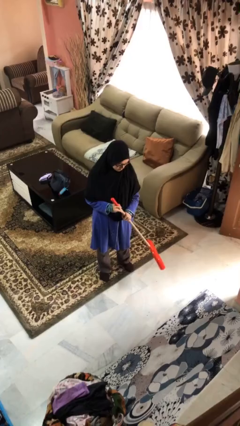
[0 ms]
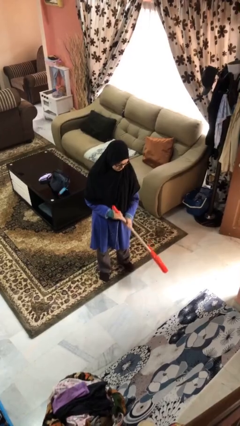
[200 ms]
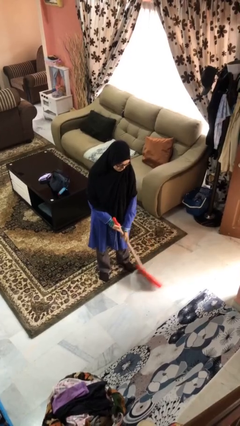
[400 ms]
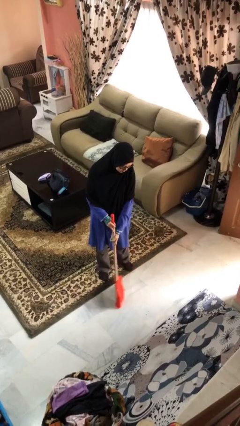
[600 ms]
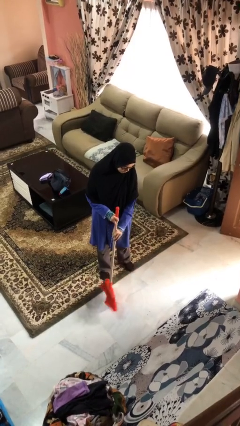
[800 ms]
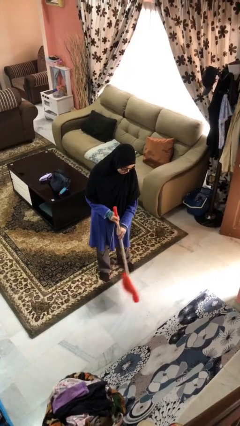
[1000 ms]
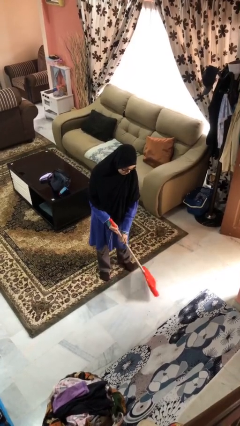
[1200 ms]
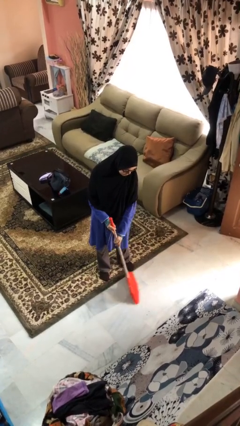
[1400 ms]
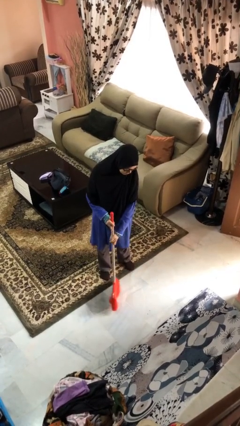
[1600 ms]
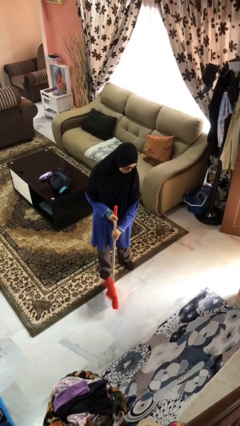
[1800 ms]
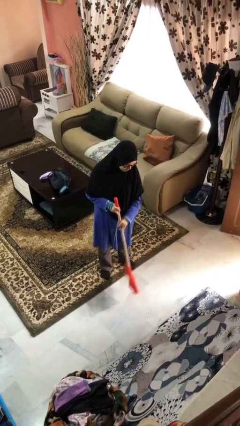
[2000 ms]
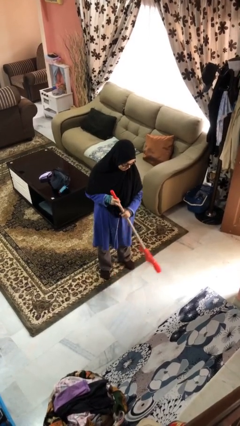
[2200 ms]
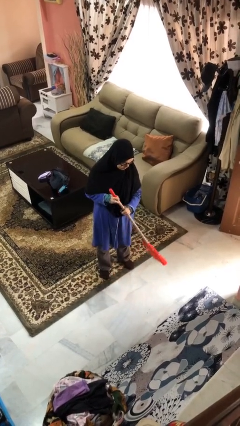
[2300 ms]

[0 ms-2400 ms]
person sweeps floor

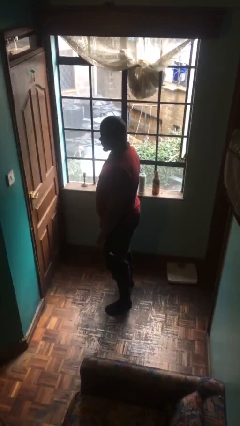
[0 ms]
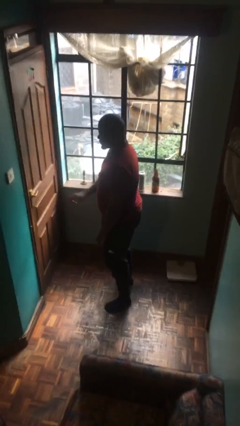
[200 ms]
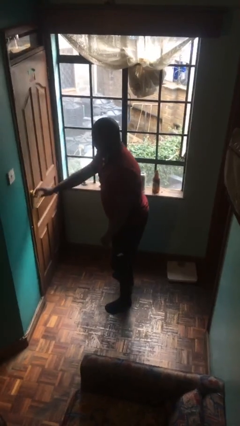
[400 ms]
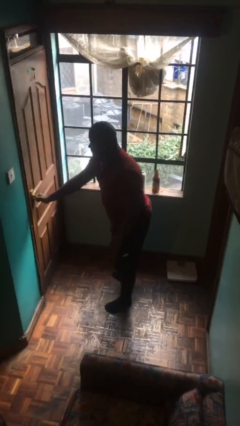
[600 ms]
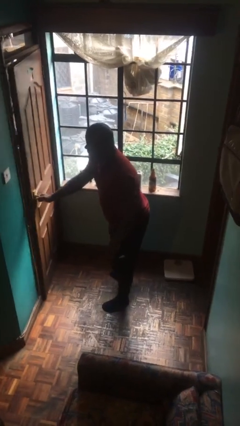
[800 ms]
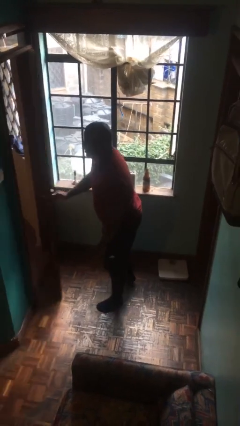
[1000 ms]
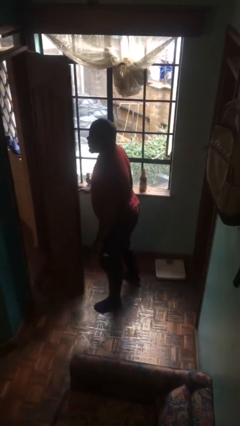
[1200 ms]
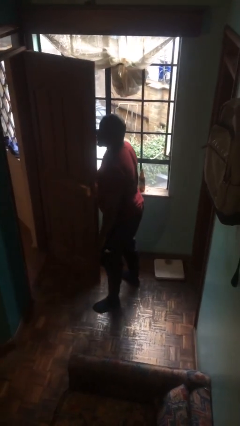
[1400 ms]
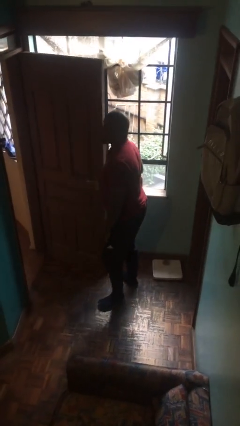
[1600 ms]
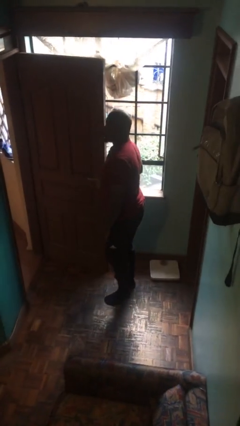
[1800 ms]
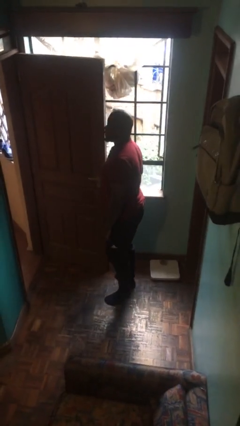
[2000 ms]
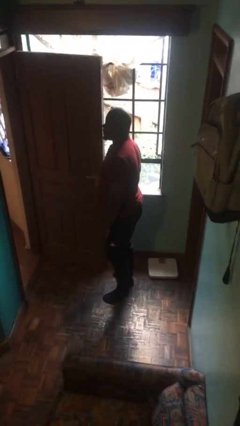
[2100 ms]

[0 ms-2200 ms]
person opens facility door

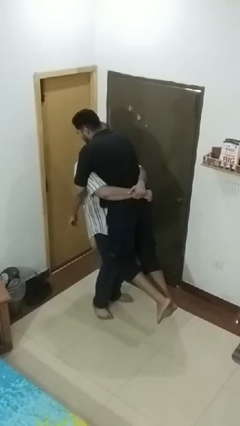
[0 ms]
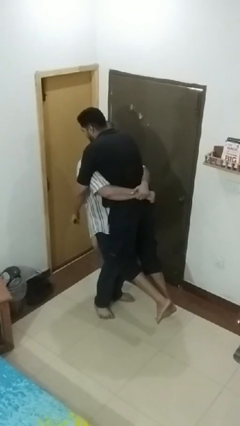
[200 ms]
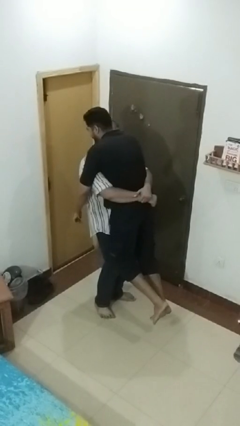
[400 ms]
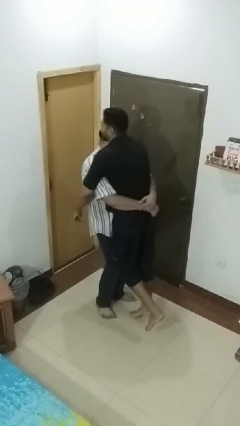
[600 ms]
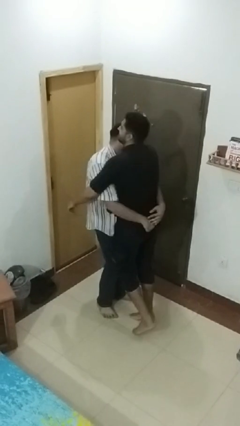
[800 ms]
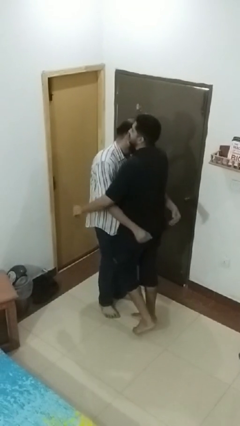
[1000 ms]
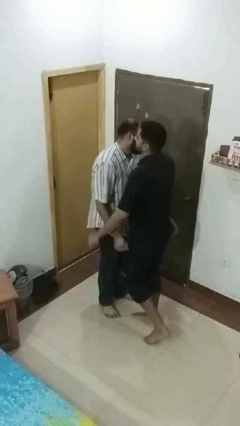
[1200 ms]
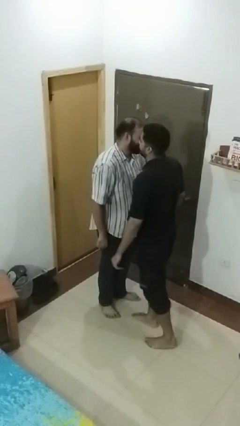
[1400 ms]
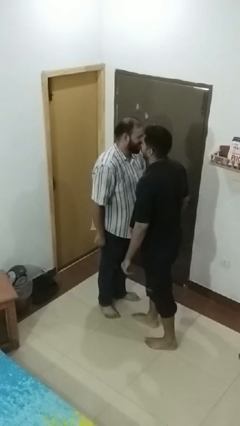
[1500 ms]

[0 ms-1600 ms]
person puts down person

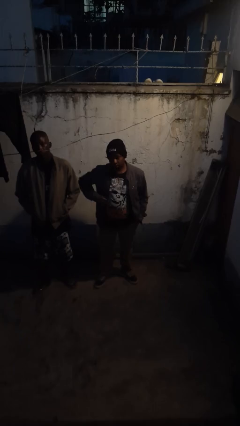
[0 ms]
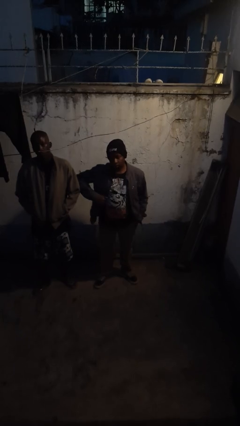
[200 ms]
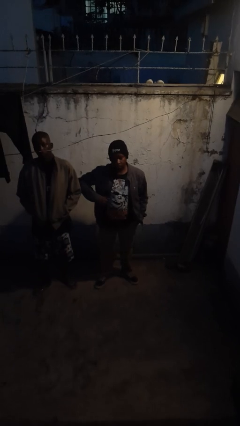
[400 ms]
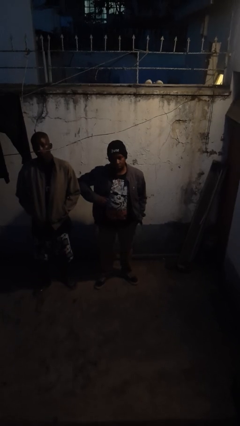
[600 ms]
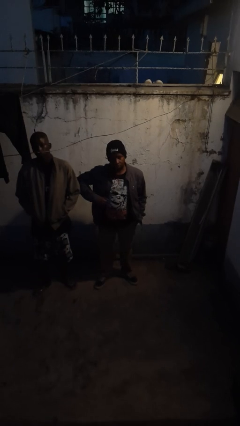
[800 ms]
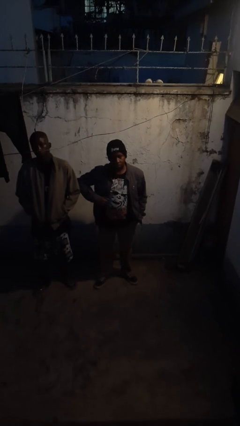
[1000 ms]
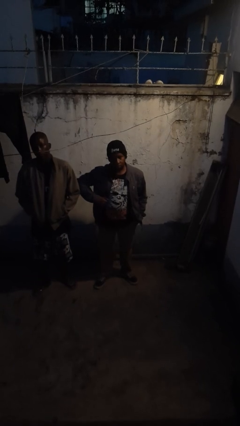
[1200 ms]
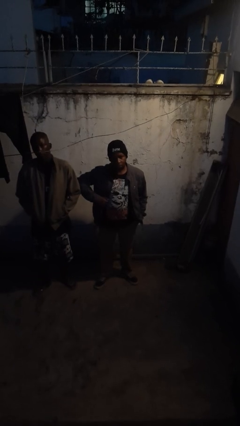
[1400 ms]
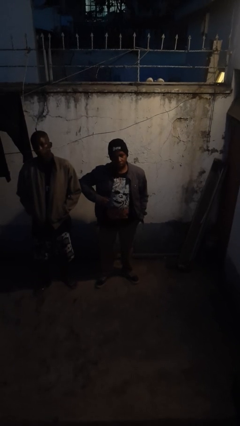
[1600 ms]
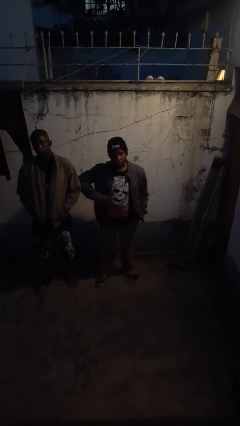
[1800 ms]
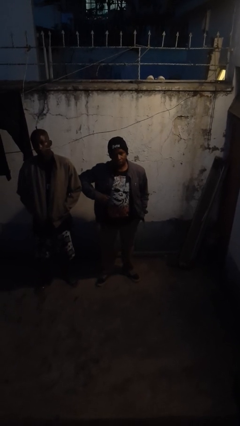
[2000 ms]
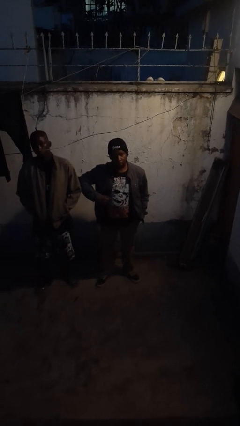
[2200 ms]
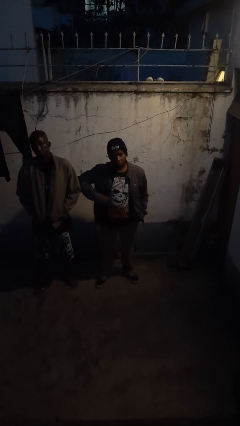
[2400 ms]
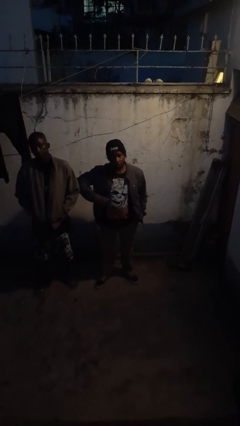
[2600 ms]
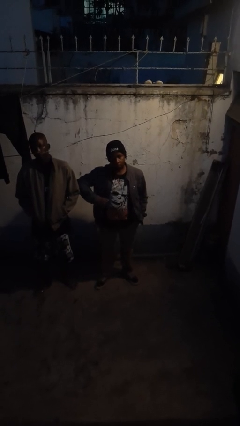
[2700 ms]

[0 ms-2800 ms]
person nudges person with elbow

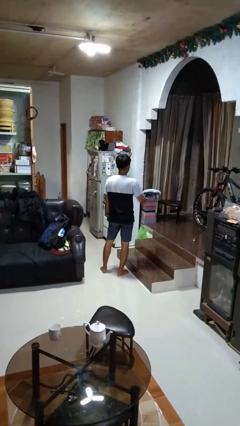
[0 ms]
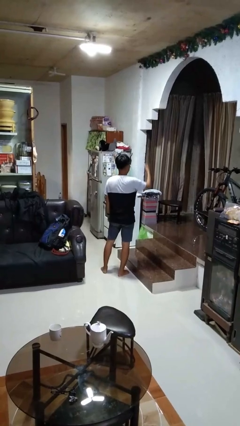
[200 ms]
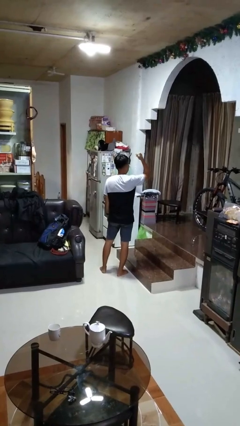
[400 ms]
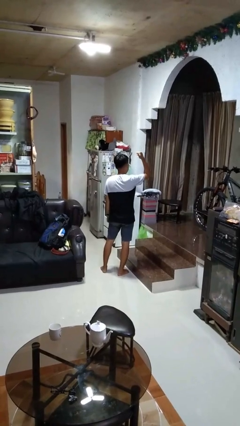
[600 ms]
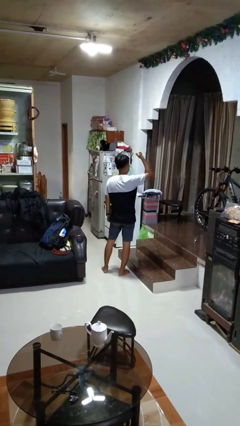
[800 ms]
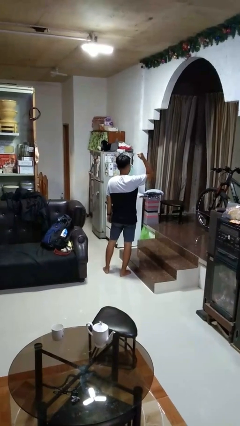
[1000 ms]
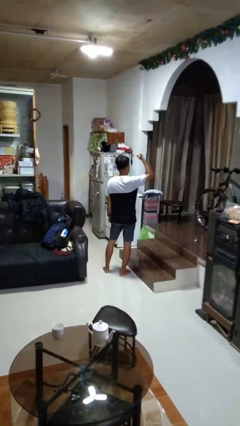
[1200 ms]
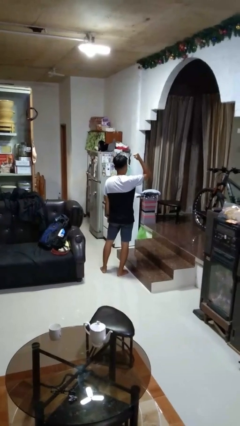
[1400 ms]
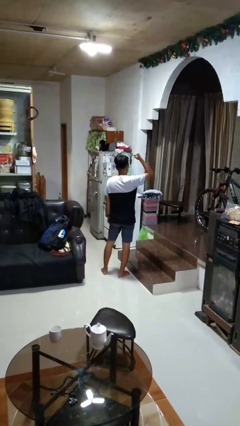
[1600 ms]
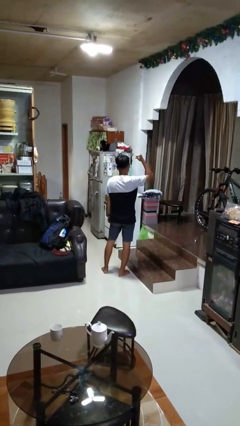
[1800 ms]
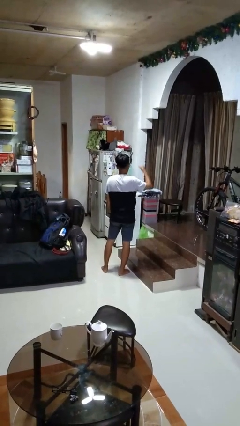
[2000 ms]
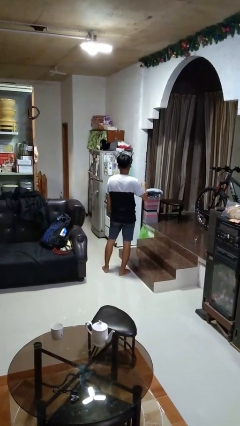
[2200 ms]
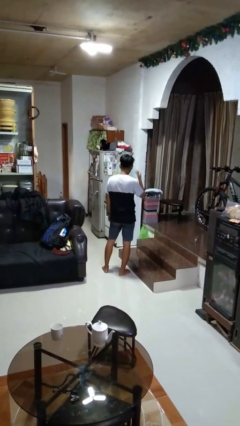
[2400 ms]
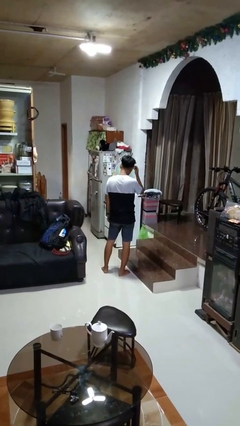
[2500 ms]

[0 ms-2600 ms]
person gestures behind me

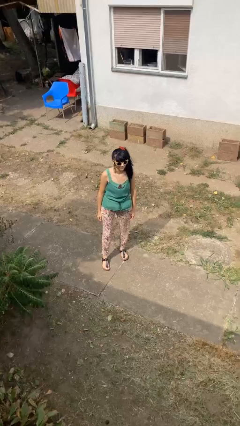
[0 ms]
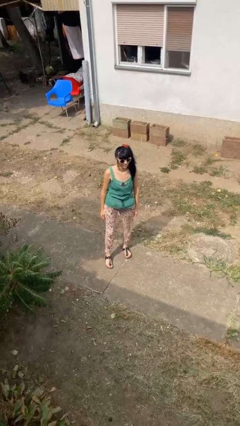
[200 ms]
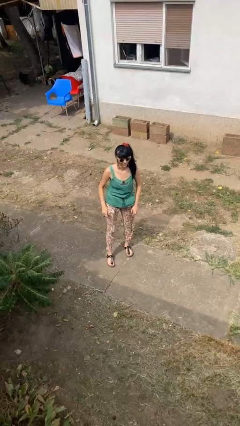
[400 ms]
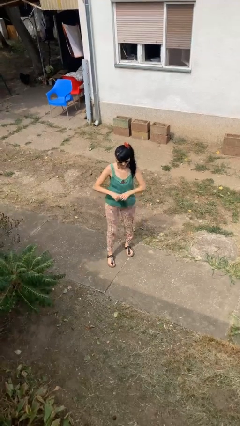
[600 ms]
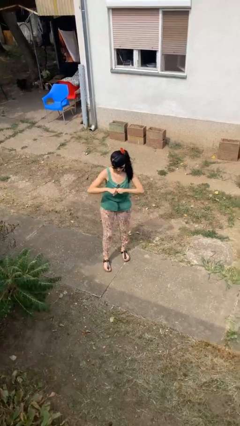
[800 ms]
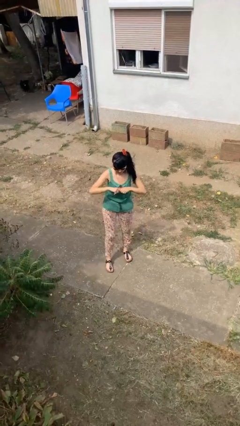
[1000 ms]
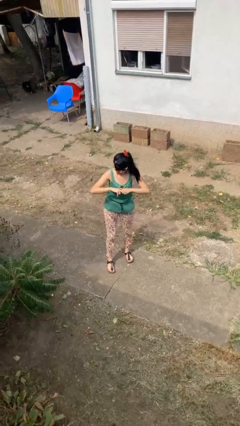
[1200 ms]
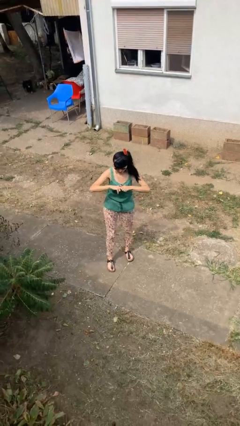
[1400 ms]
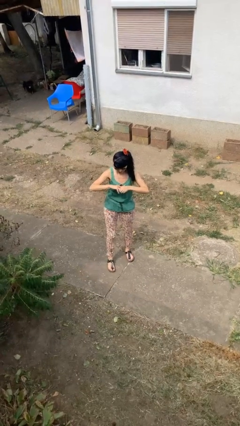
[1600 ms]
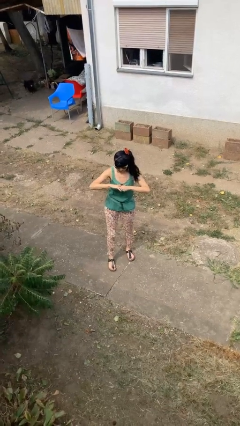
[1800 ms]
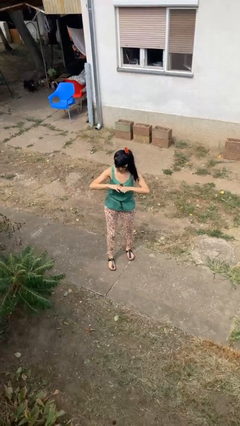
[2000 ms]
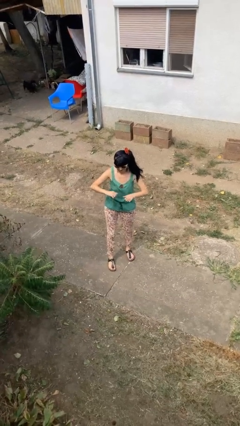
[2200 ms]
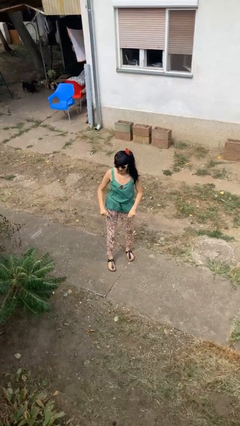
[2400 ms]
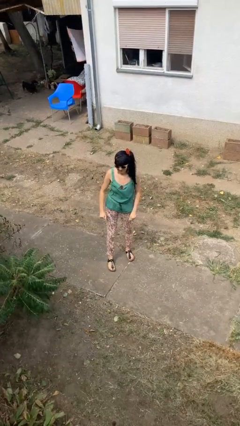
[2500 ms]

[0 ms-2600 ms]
person cracks knuckles

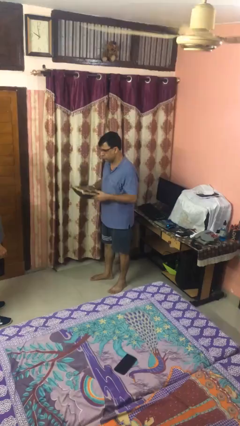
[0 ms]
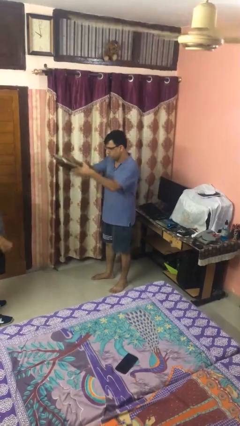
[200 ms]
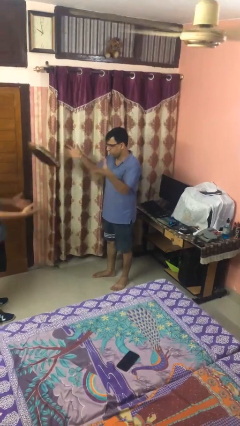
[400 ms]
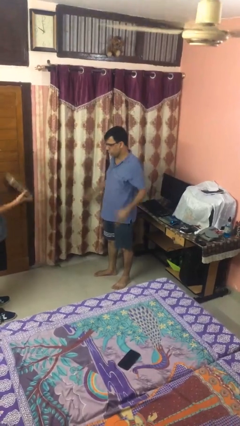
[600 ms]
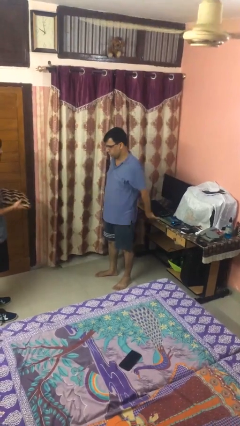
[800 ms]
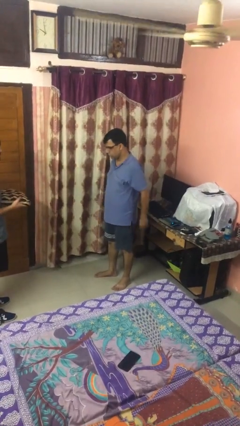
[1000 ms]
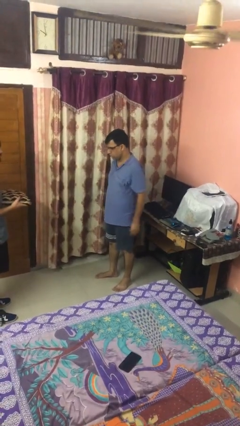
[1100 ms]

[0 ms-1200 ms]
person throws object to person

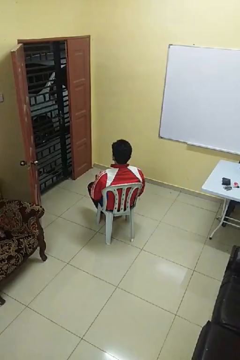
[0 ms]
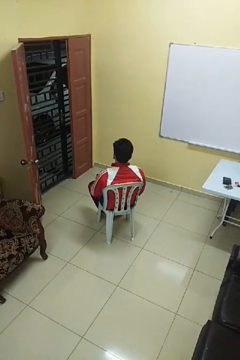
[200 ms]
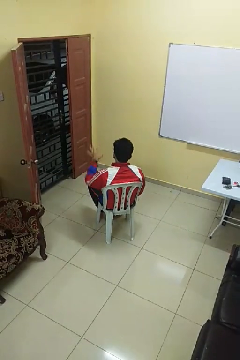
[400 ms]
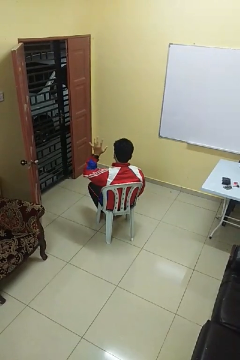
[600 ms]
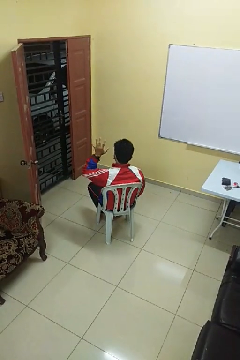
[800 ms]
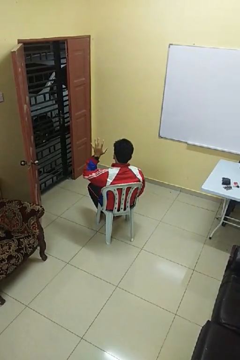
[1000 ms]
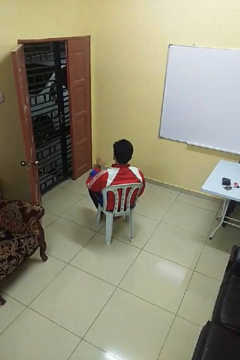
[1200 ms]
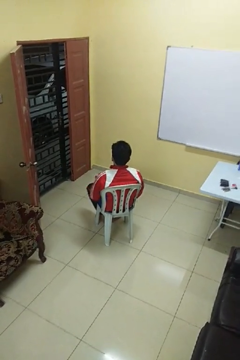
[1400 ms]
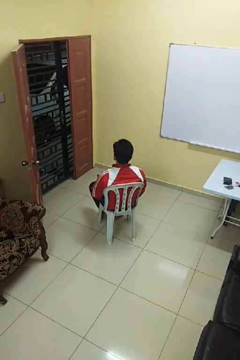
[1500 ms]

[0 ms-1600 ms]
person gestures number five
